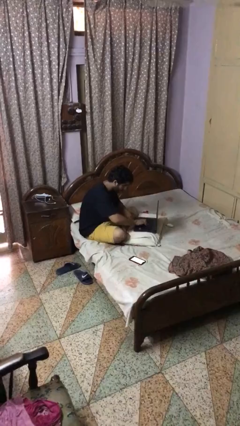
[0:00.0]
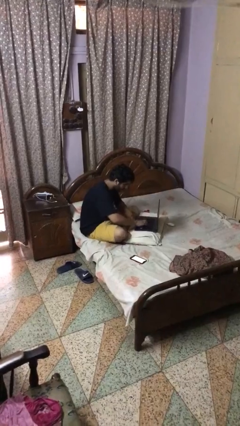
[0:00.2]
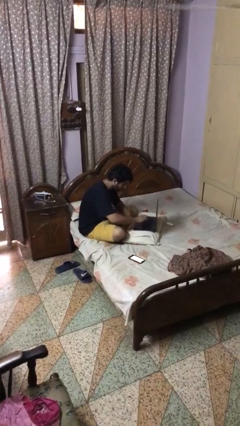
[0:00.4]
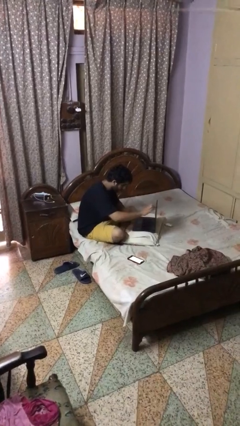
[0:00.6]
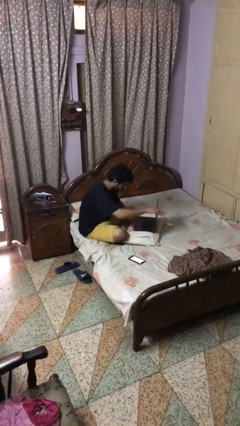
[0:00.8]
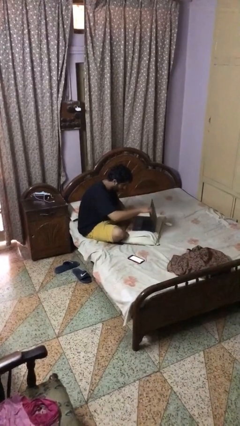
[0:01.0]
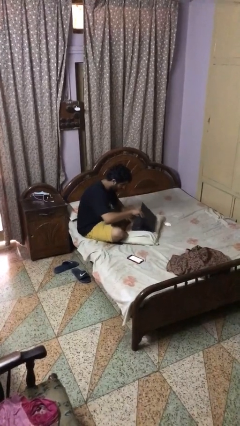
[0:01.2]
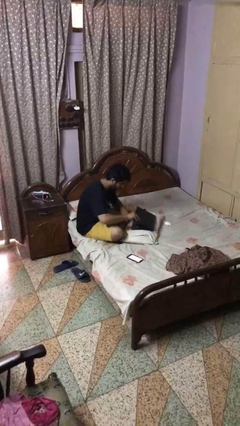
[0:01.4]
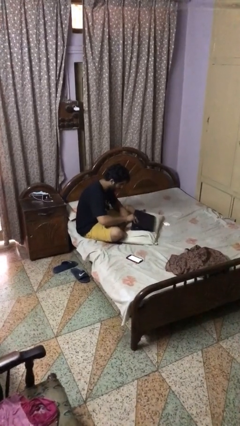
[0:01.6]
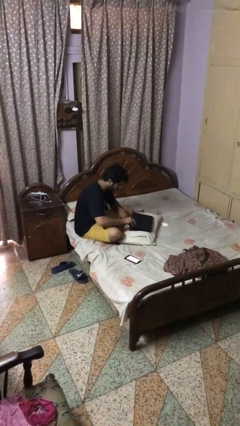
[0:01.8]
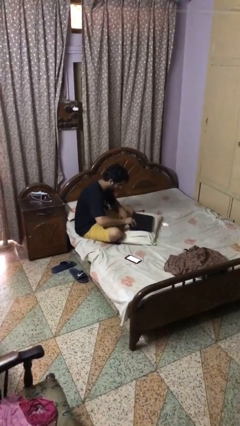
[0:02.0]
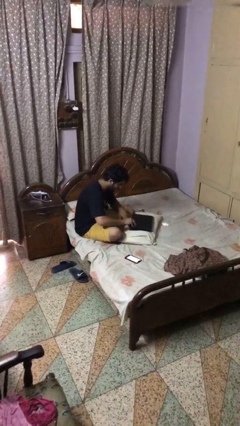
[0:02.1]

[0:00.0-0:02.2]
person closes laptop

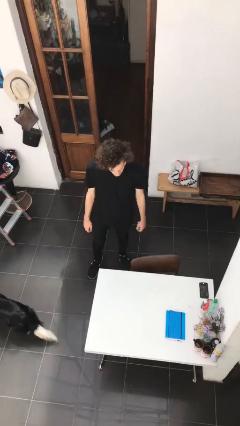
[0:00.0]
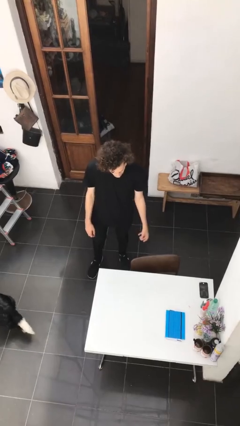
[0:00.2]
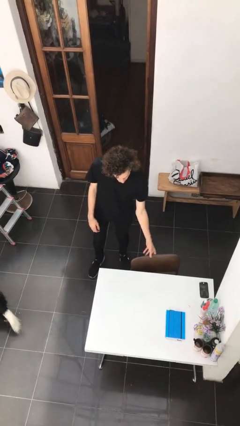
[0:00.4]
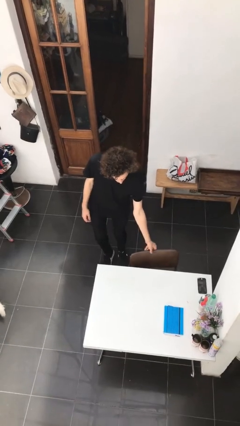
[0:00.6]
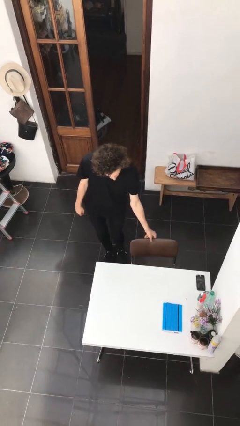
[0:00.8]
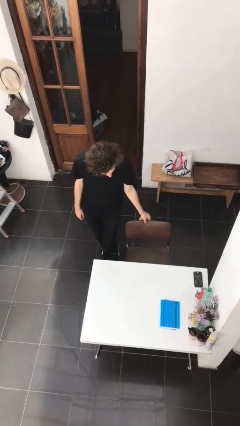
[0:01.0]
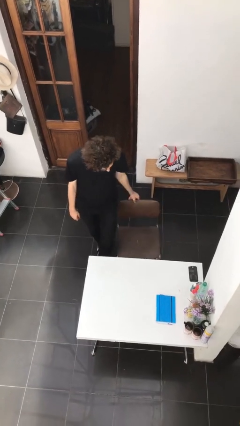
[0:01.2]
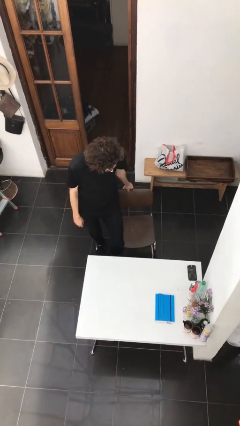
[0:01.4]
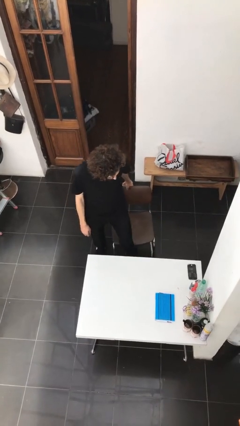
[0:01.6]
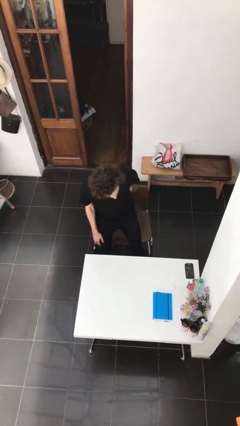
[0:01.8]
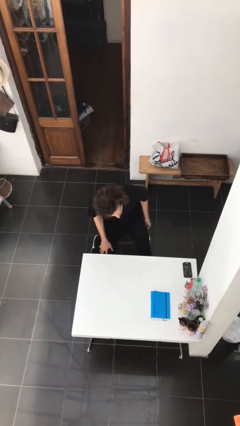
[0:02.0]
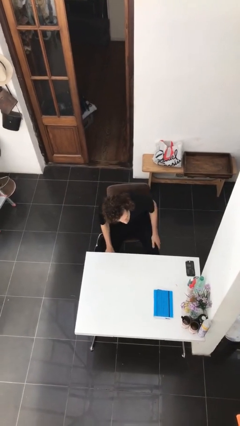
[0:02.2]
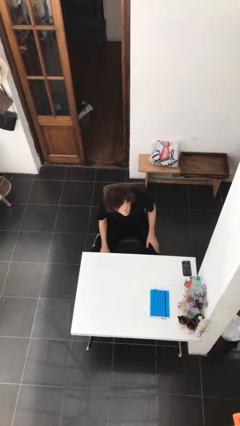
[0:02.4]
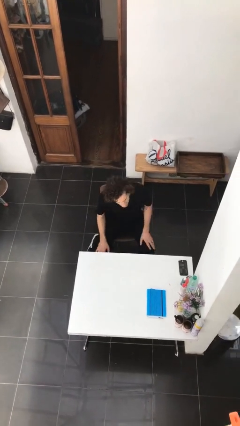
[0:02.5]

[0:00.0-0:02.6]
person sits down

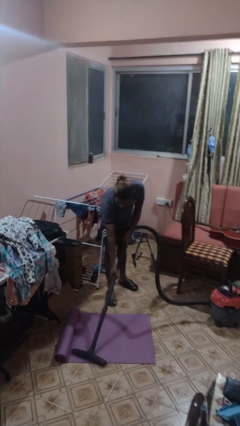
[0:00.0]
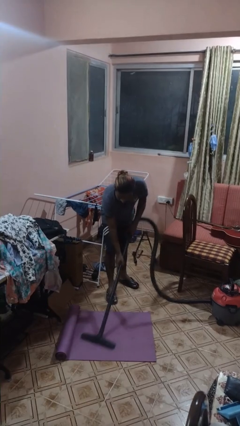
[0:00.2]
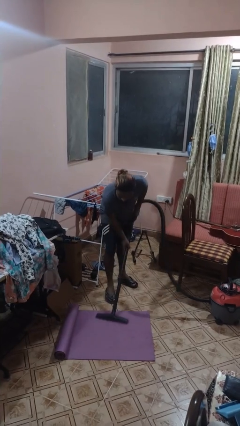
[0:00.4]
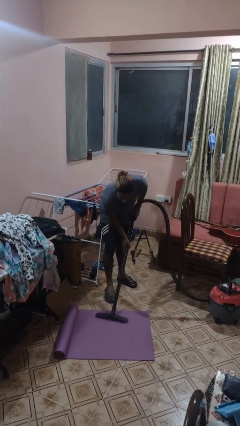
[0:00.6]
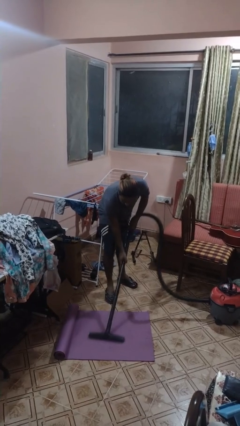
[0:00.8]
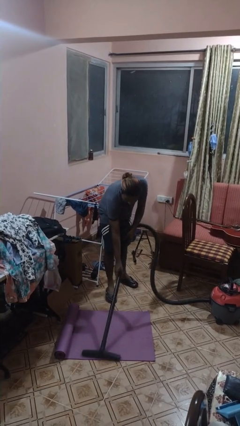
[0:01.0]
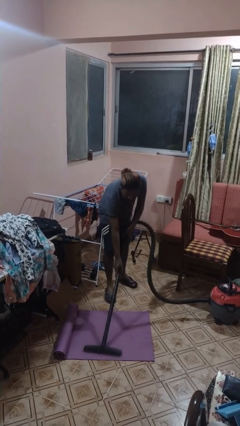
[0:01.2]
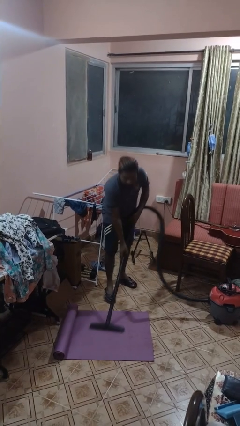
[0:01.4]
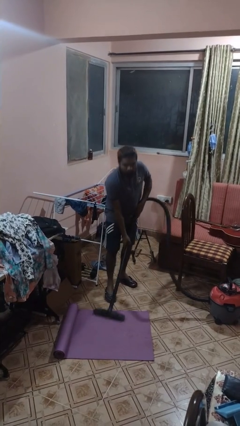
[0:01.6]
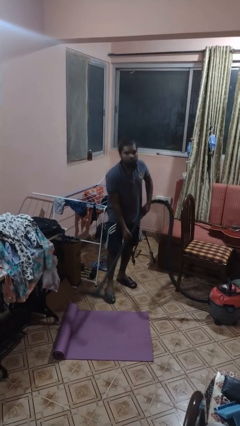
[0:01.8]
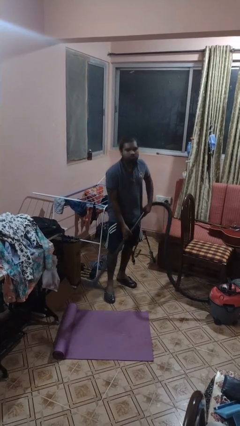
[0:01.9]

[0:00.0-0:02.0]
person vacuums carpet

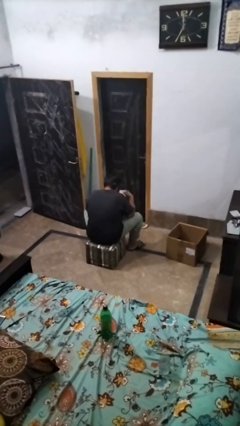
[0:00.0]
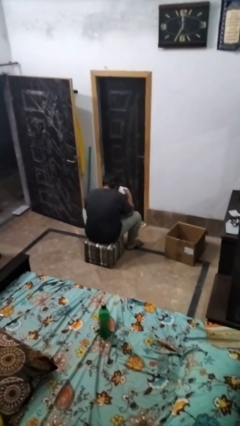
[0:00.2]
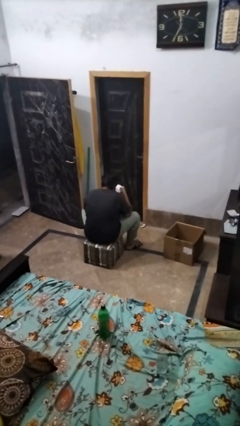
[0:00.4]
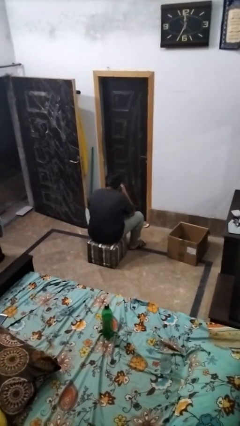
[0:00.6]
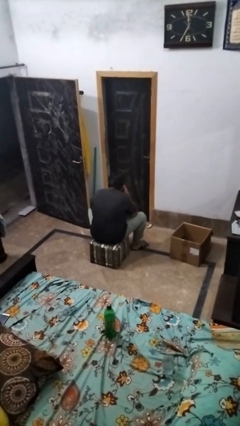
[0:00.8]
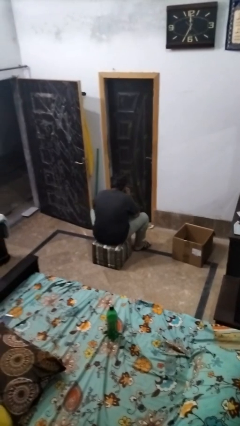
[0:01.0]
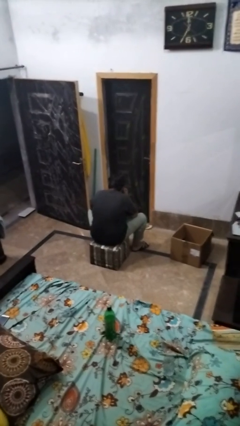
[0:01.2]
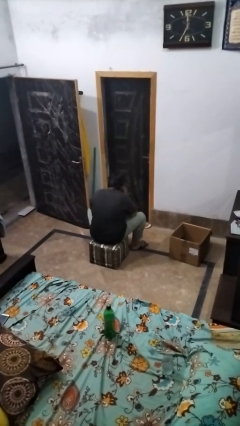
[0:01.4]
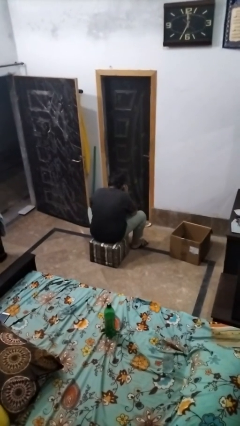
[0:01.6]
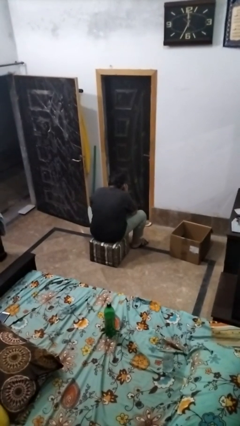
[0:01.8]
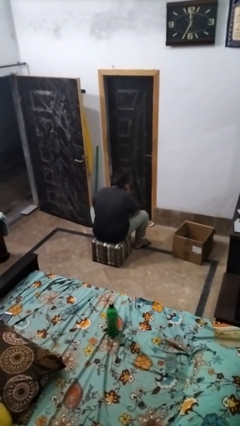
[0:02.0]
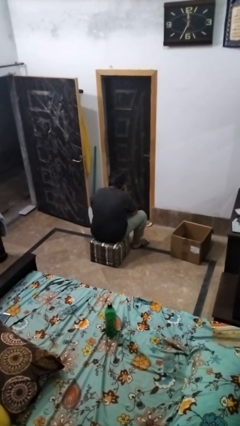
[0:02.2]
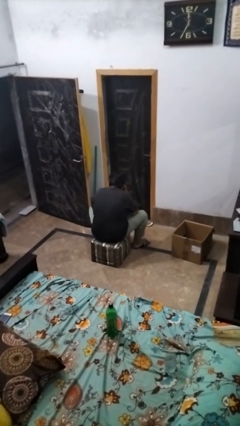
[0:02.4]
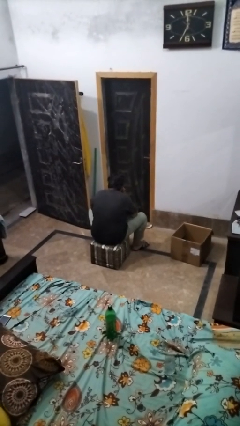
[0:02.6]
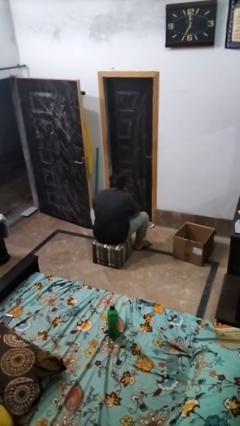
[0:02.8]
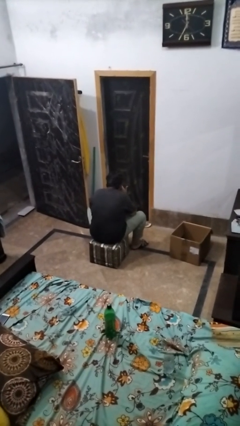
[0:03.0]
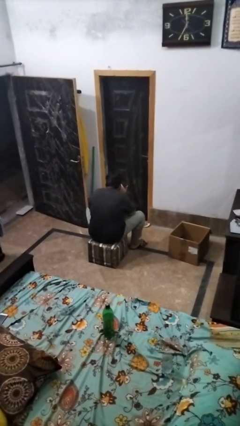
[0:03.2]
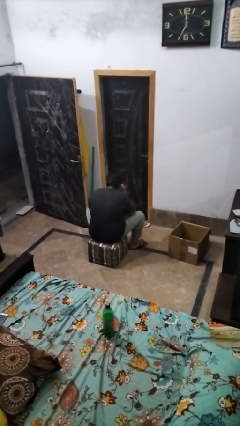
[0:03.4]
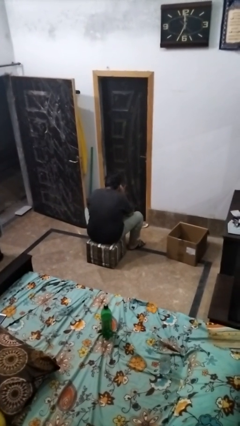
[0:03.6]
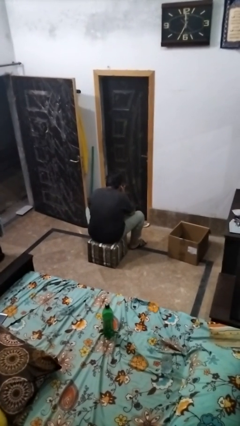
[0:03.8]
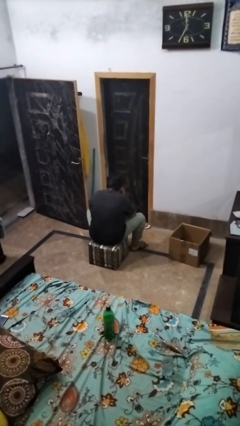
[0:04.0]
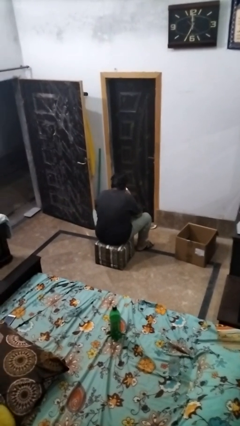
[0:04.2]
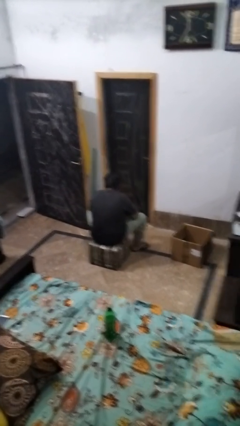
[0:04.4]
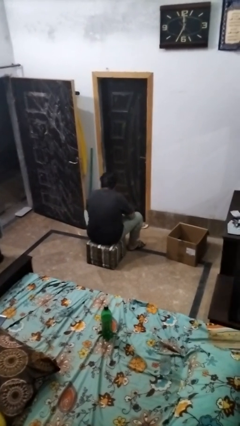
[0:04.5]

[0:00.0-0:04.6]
person blows nose

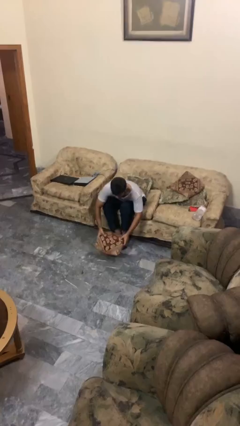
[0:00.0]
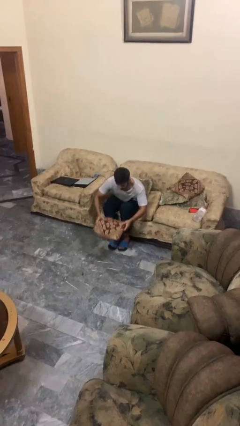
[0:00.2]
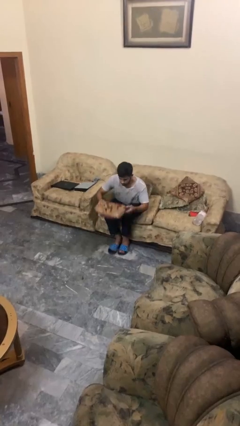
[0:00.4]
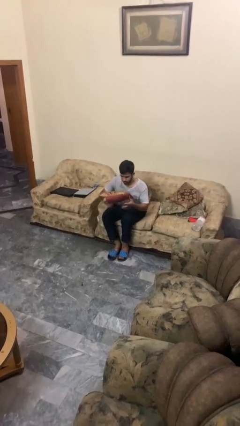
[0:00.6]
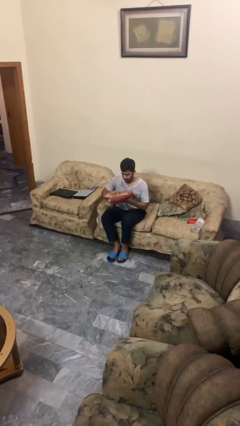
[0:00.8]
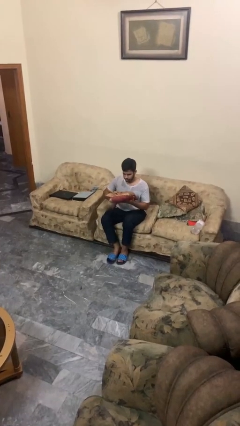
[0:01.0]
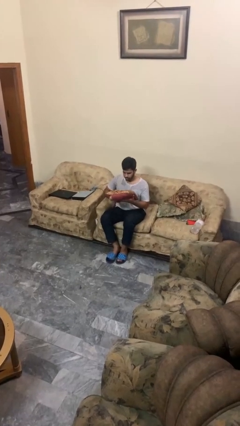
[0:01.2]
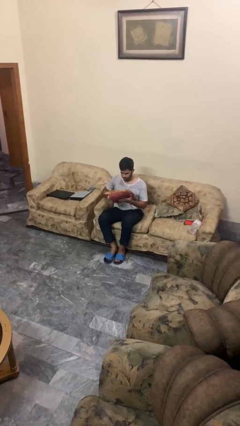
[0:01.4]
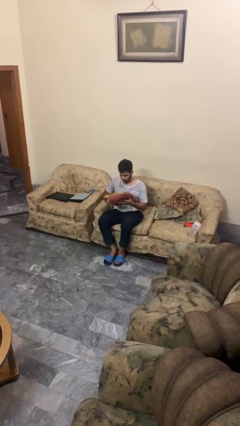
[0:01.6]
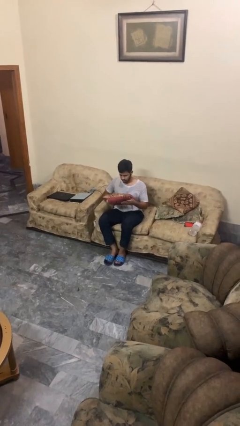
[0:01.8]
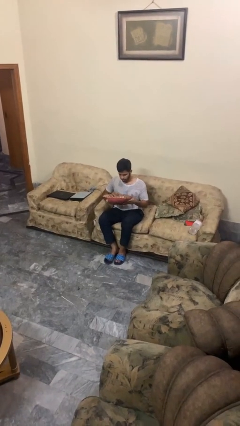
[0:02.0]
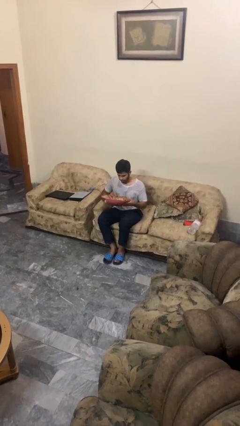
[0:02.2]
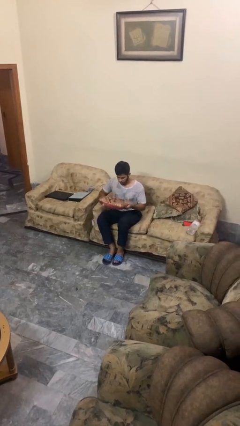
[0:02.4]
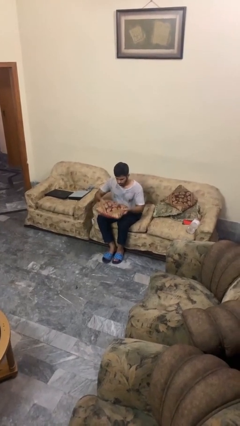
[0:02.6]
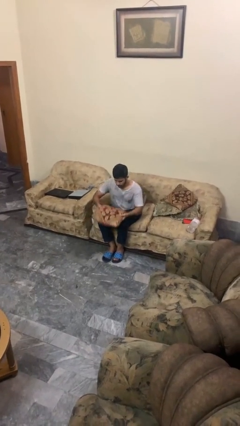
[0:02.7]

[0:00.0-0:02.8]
person picks up object from floor

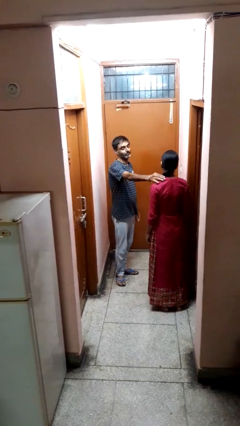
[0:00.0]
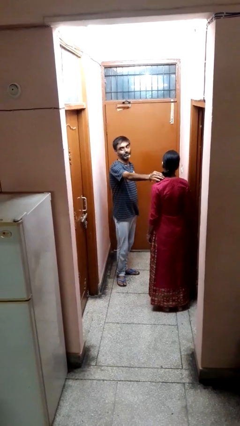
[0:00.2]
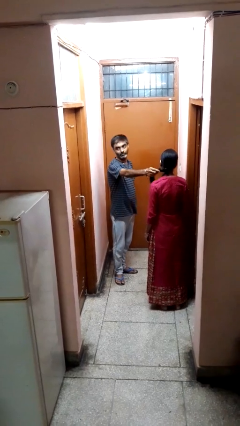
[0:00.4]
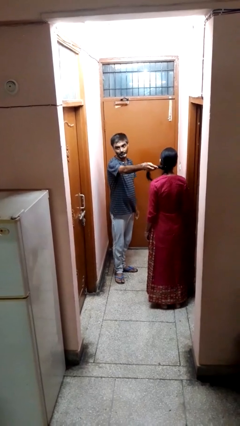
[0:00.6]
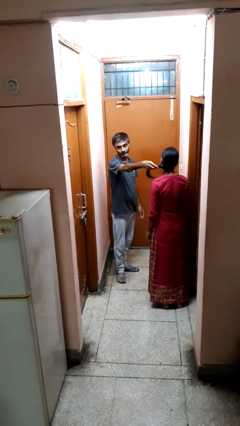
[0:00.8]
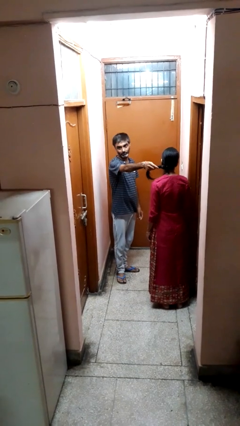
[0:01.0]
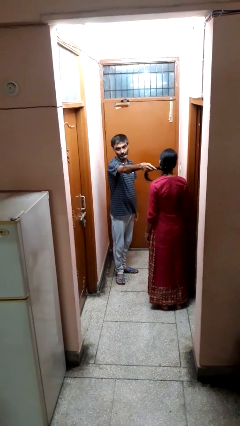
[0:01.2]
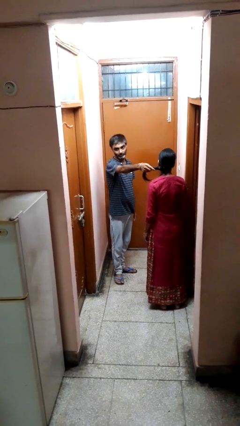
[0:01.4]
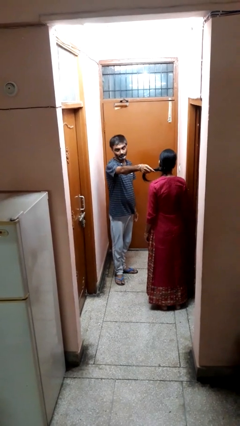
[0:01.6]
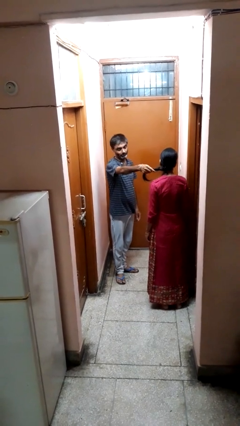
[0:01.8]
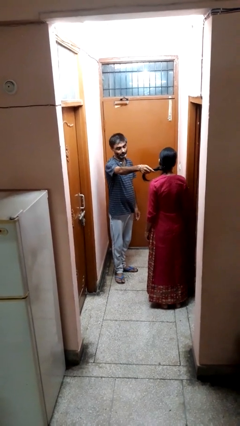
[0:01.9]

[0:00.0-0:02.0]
person grabs person by hair

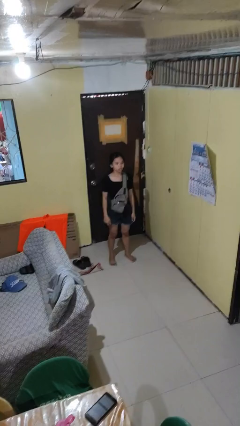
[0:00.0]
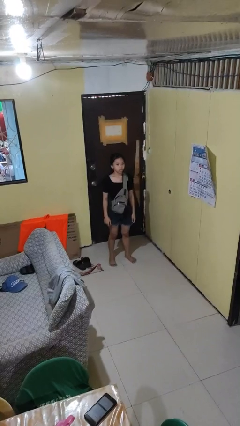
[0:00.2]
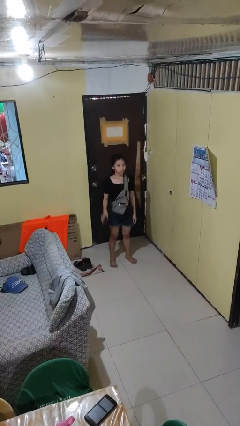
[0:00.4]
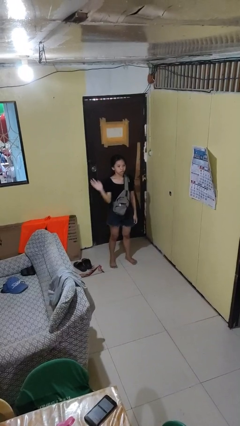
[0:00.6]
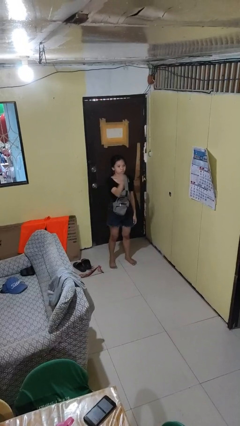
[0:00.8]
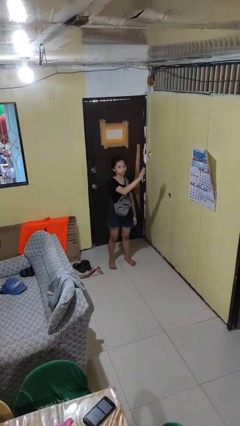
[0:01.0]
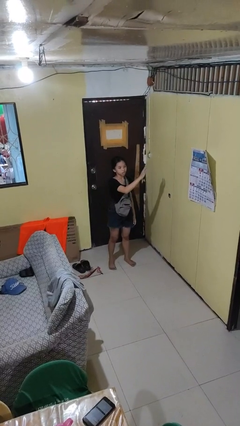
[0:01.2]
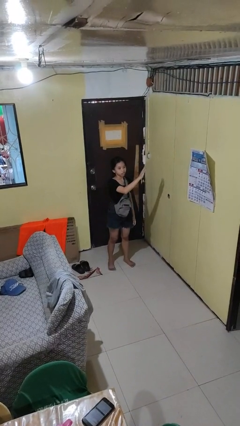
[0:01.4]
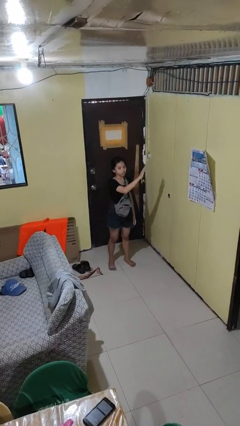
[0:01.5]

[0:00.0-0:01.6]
person gestures swipe left
